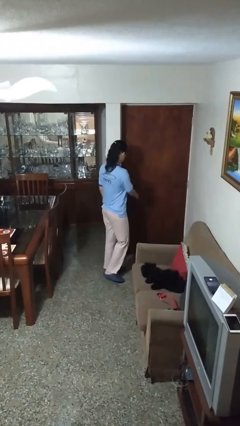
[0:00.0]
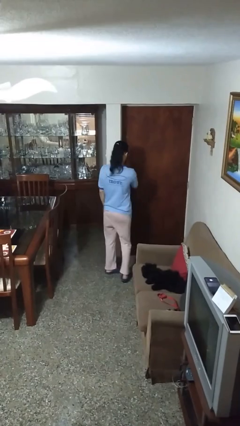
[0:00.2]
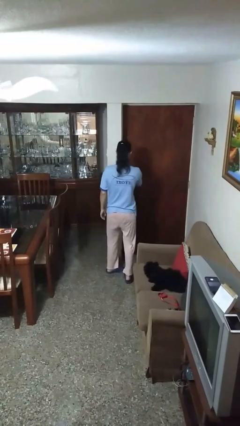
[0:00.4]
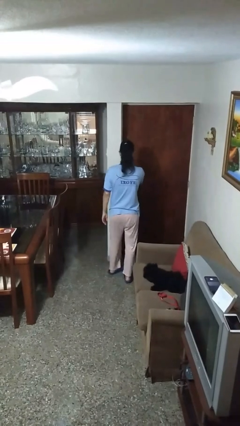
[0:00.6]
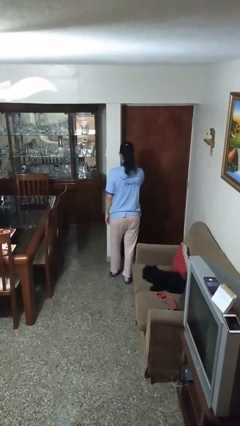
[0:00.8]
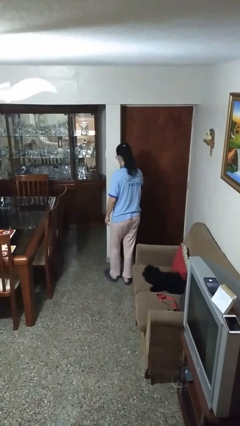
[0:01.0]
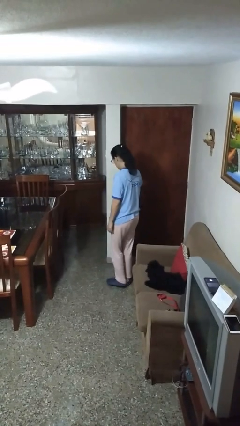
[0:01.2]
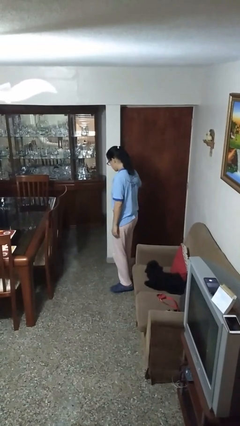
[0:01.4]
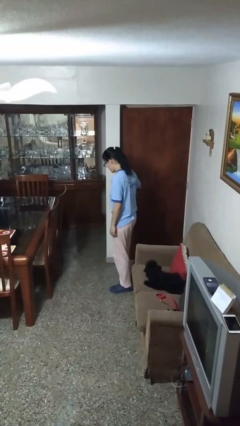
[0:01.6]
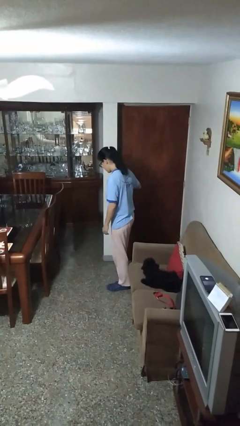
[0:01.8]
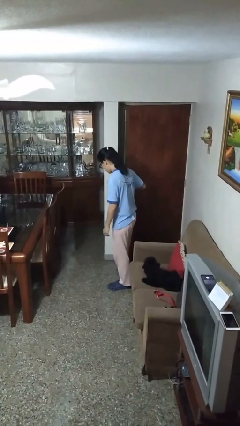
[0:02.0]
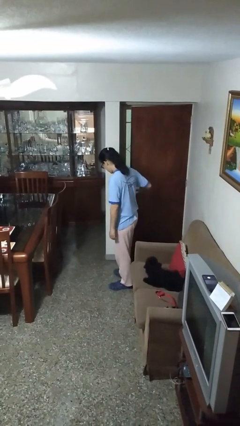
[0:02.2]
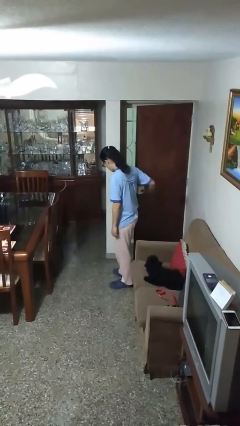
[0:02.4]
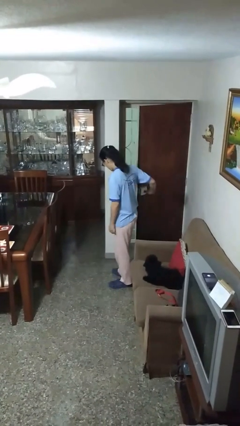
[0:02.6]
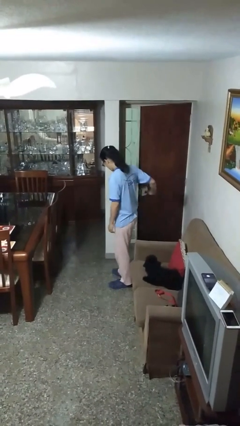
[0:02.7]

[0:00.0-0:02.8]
person opens facility door

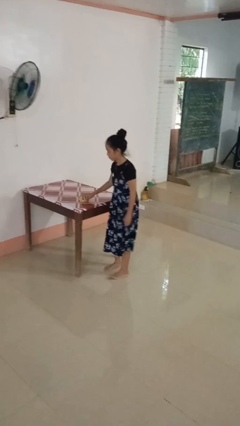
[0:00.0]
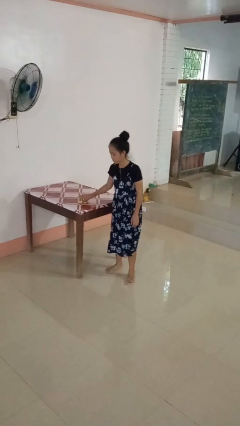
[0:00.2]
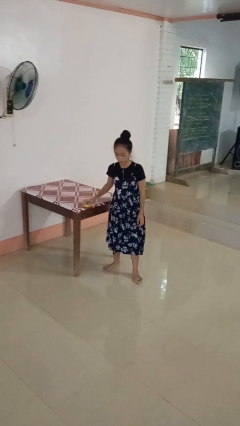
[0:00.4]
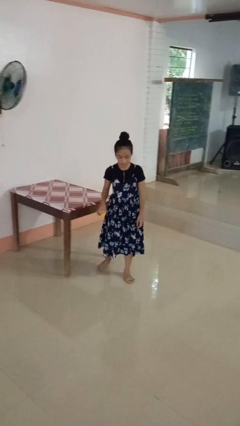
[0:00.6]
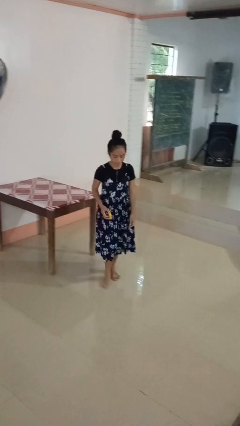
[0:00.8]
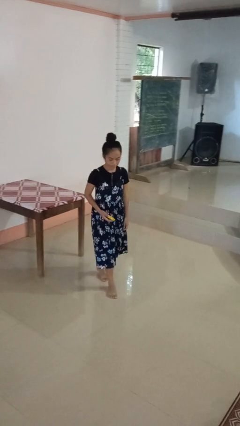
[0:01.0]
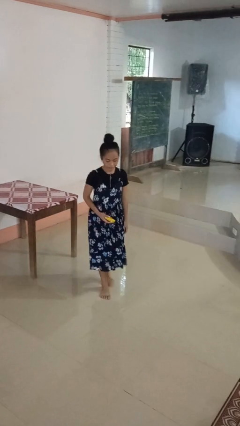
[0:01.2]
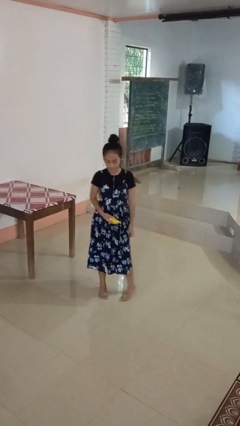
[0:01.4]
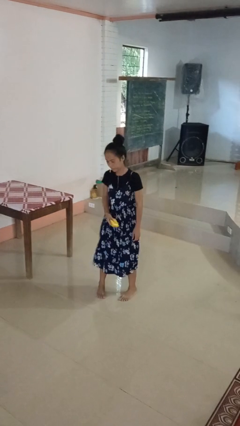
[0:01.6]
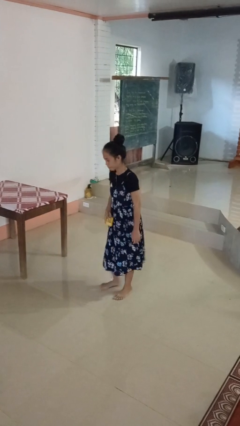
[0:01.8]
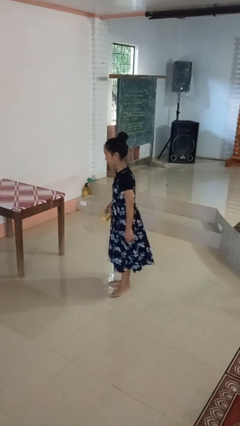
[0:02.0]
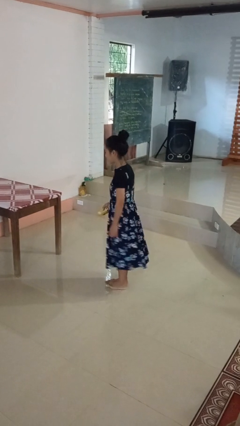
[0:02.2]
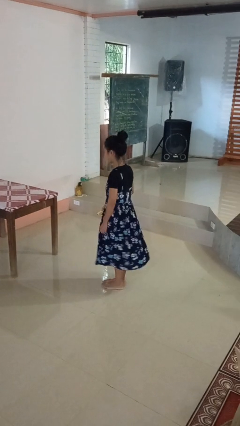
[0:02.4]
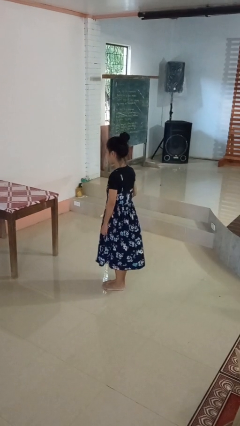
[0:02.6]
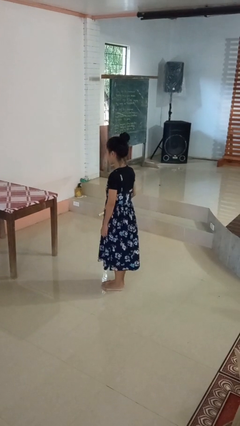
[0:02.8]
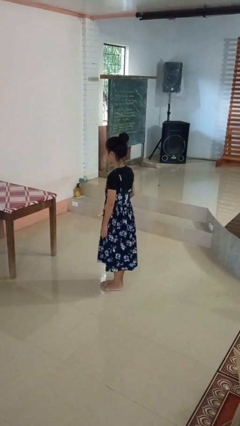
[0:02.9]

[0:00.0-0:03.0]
person picks up object from table

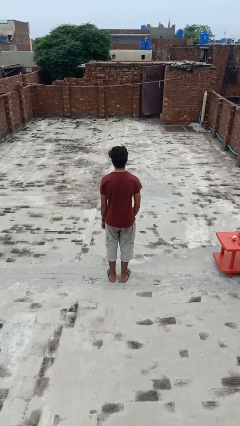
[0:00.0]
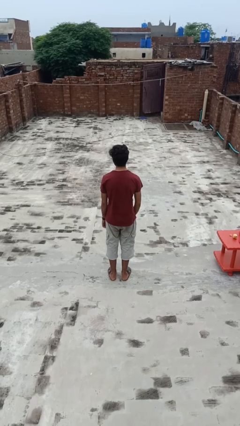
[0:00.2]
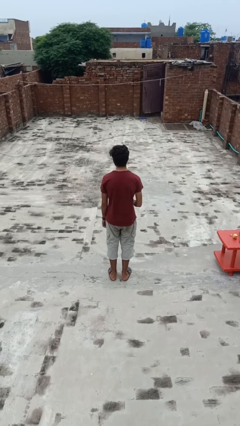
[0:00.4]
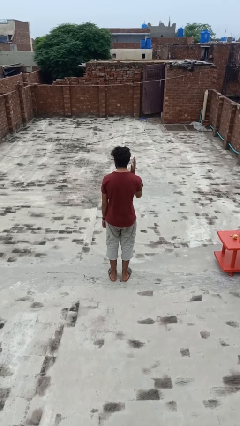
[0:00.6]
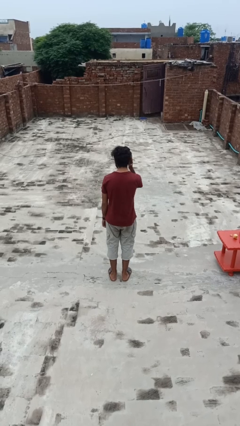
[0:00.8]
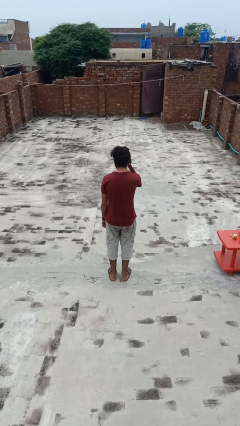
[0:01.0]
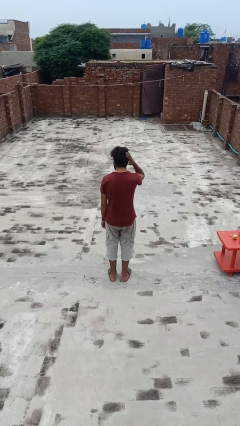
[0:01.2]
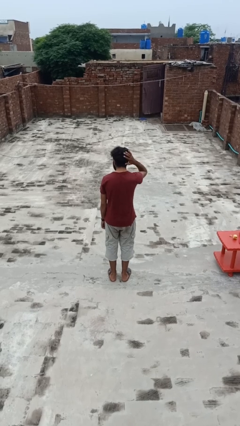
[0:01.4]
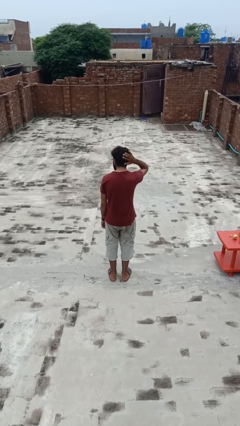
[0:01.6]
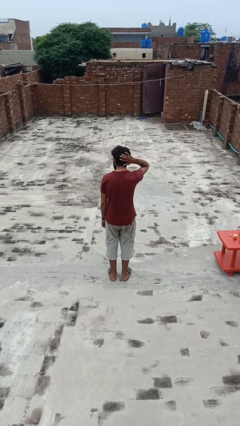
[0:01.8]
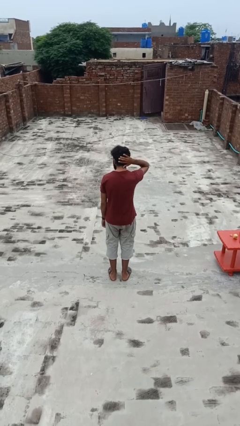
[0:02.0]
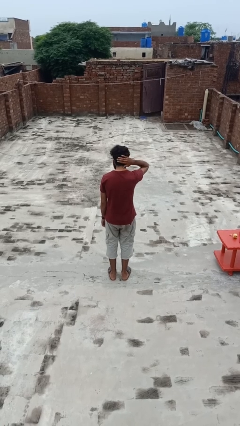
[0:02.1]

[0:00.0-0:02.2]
person pats head

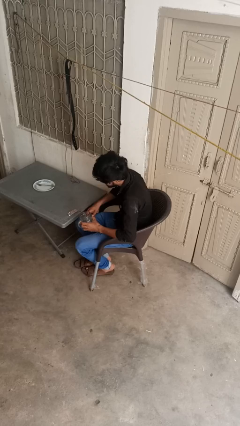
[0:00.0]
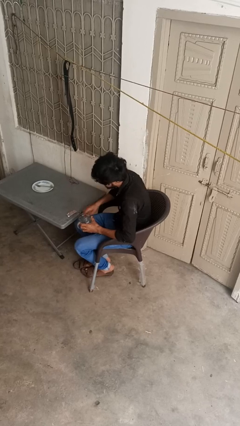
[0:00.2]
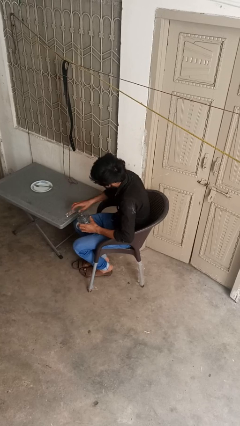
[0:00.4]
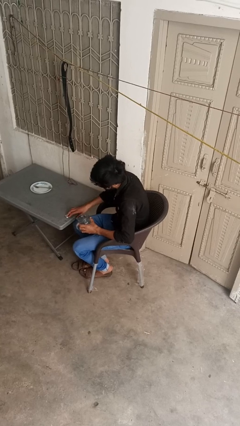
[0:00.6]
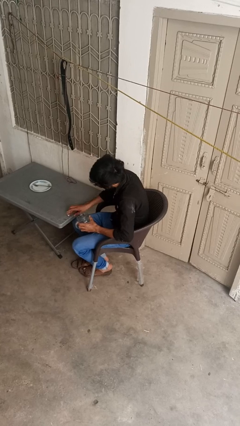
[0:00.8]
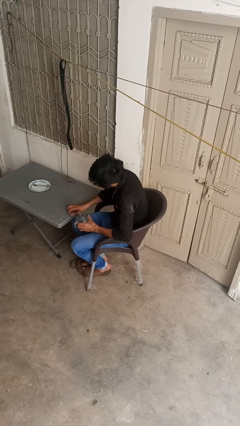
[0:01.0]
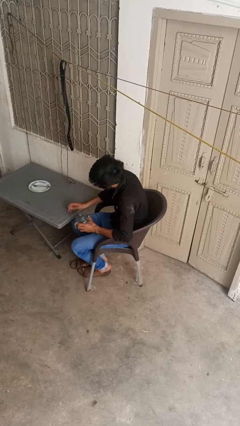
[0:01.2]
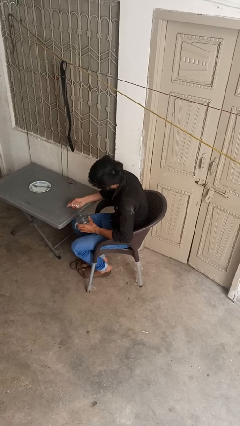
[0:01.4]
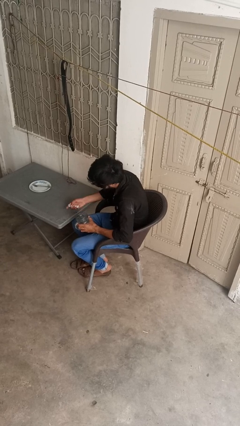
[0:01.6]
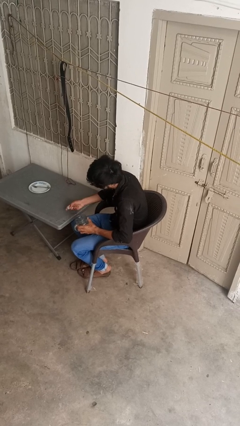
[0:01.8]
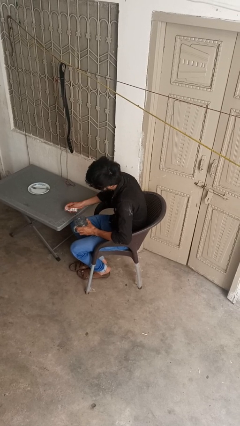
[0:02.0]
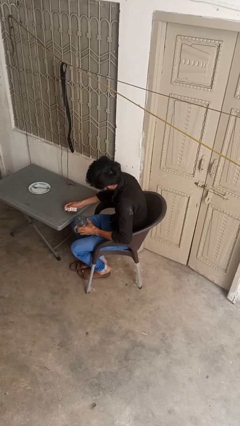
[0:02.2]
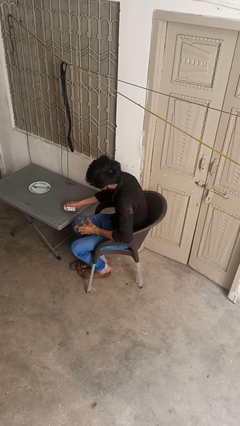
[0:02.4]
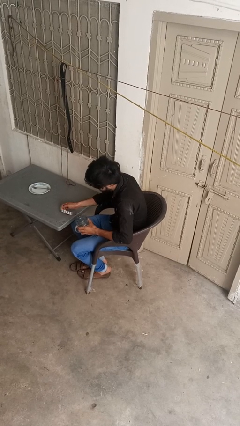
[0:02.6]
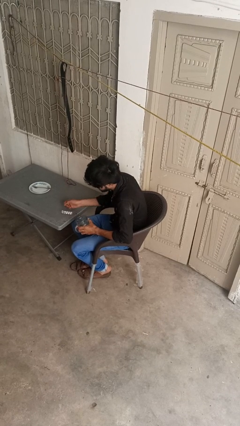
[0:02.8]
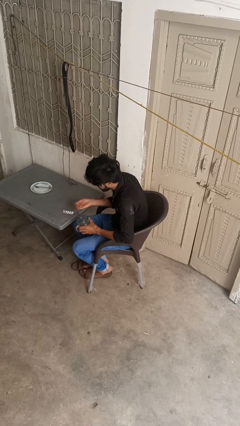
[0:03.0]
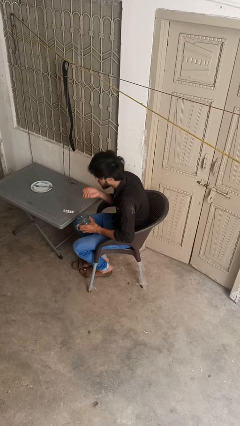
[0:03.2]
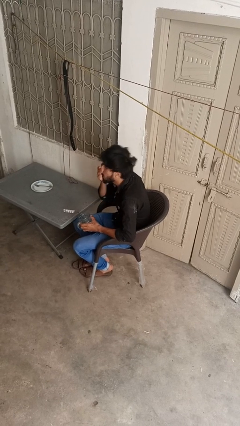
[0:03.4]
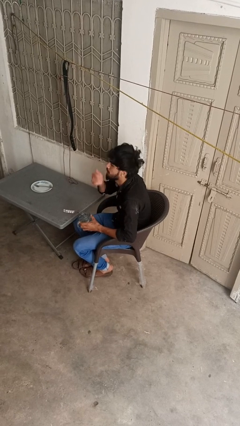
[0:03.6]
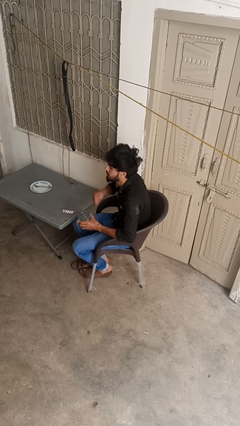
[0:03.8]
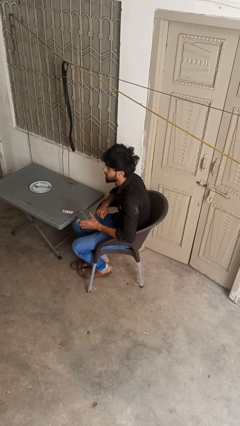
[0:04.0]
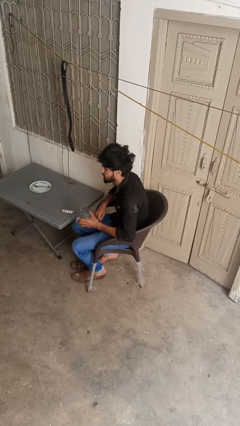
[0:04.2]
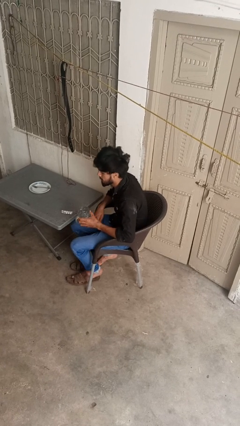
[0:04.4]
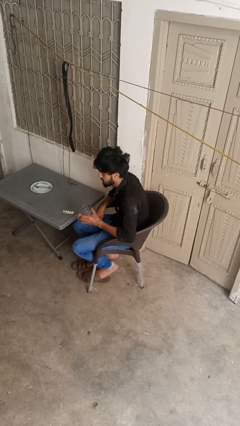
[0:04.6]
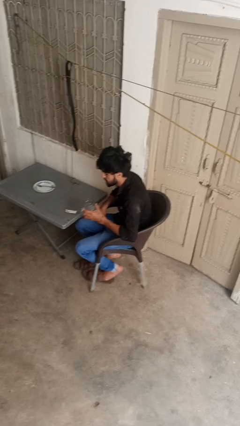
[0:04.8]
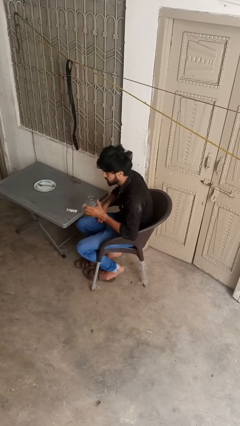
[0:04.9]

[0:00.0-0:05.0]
person takes medicine pills

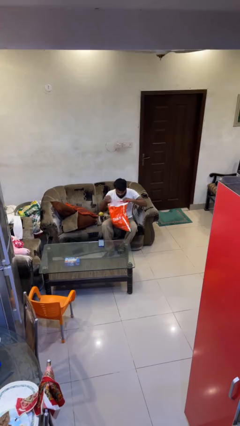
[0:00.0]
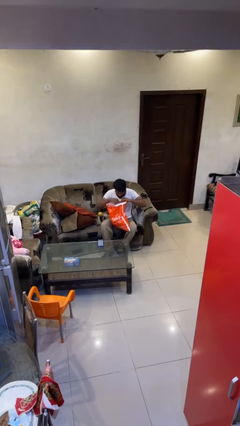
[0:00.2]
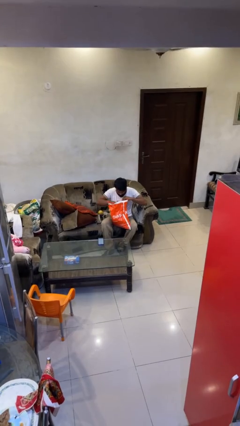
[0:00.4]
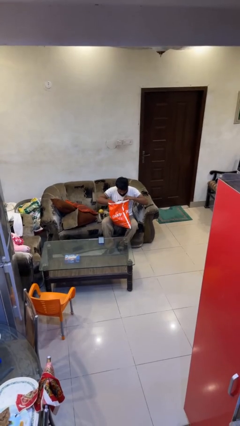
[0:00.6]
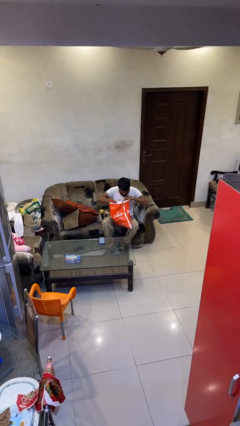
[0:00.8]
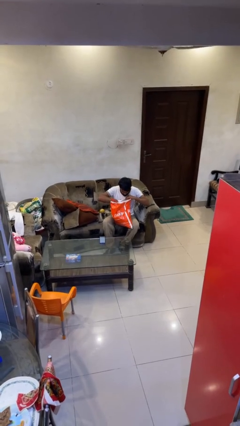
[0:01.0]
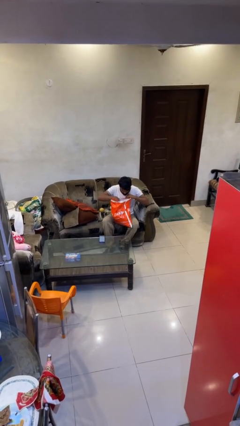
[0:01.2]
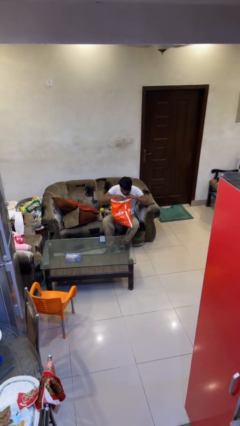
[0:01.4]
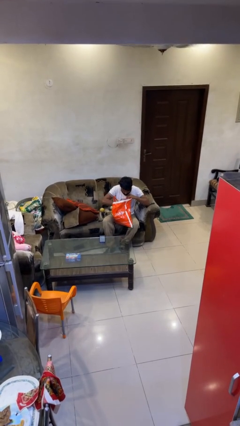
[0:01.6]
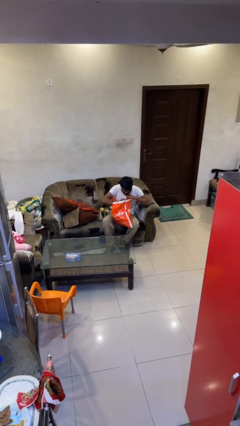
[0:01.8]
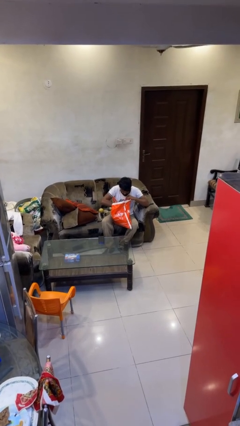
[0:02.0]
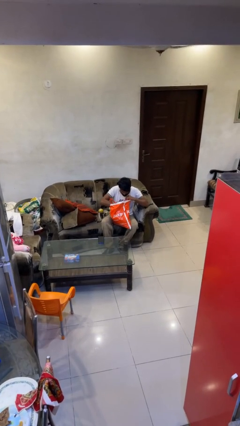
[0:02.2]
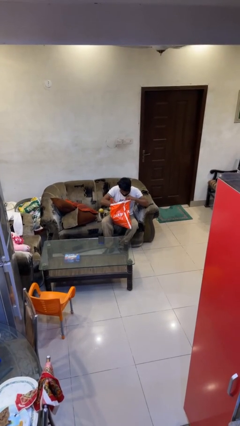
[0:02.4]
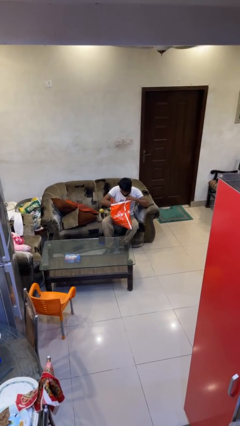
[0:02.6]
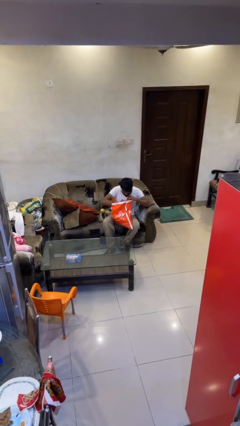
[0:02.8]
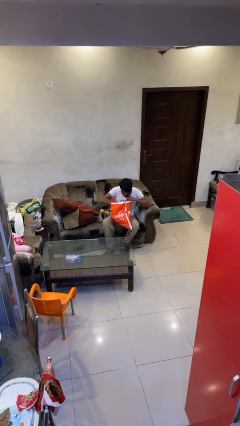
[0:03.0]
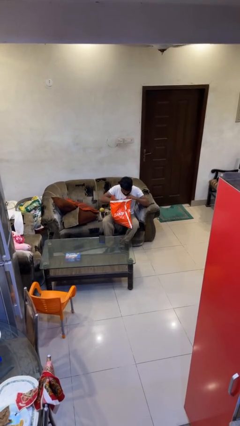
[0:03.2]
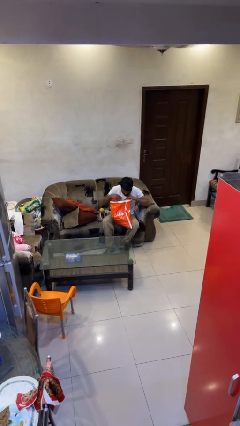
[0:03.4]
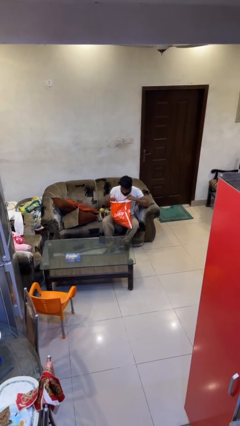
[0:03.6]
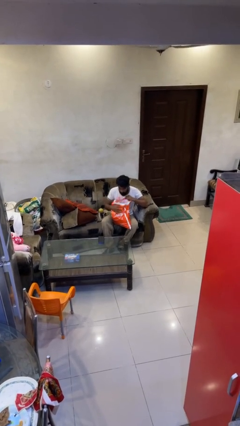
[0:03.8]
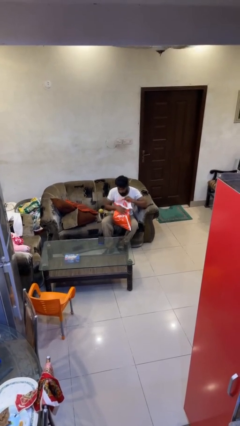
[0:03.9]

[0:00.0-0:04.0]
person searches in bag

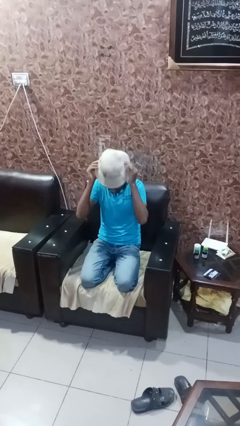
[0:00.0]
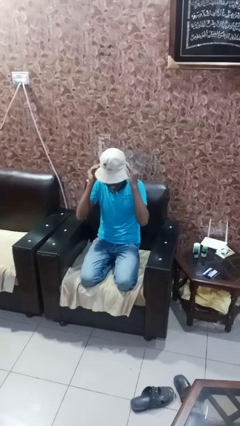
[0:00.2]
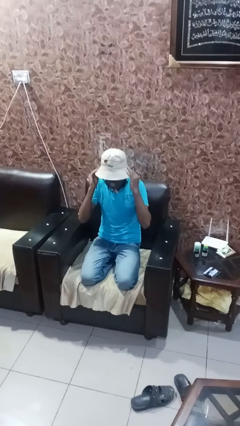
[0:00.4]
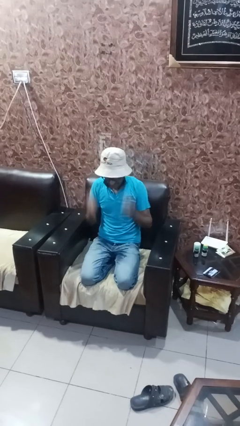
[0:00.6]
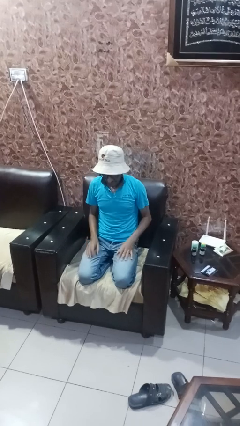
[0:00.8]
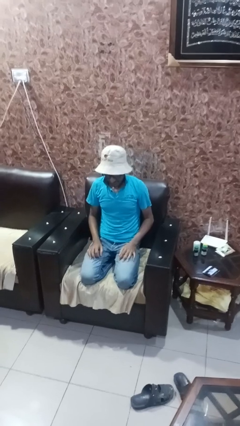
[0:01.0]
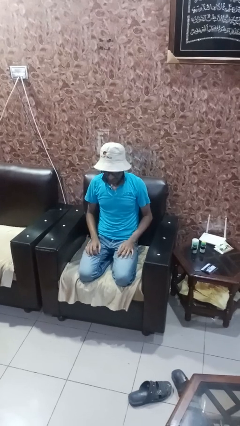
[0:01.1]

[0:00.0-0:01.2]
person puts on hat
